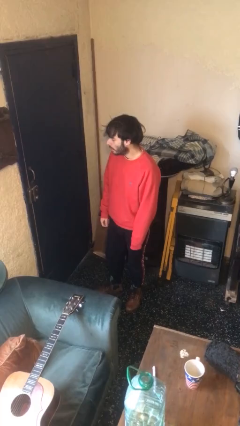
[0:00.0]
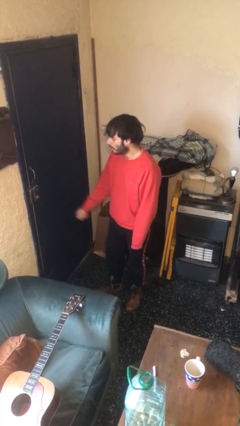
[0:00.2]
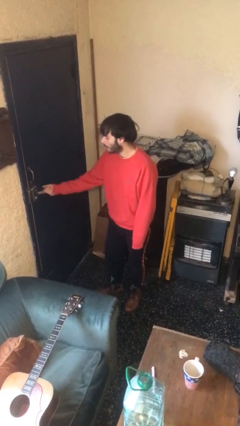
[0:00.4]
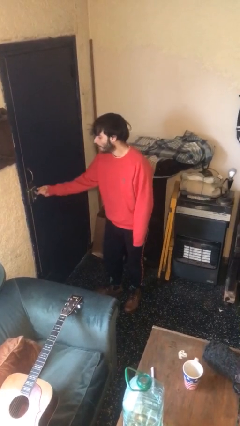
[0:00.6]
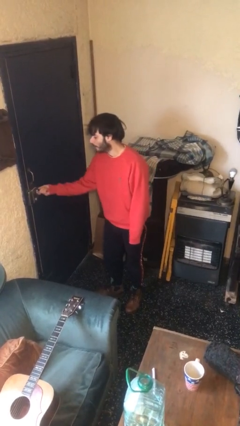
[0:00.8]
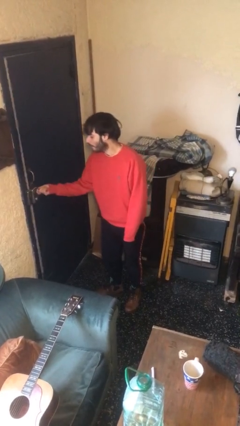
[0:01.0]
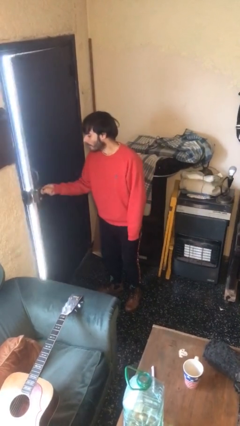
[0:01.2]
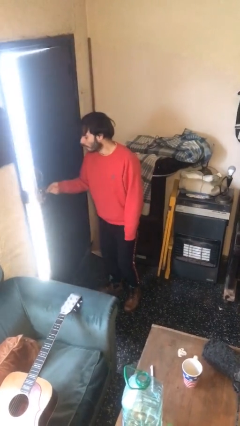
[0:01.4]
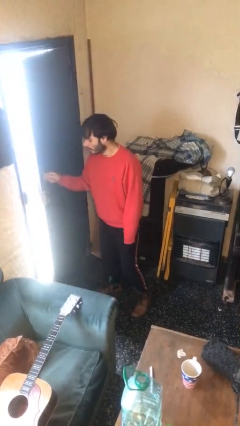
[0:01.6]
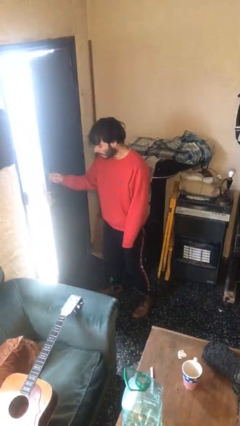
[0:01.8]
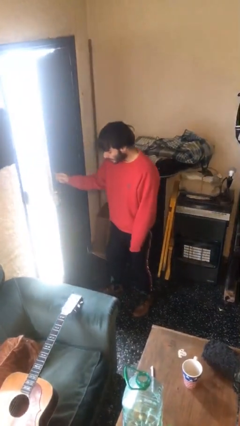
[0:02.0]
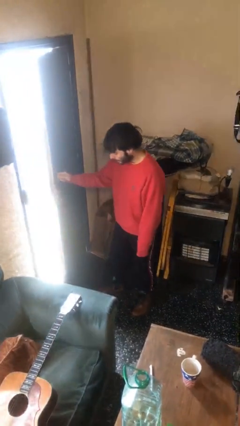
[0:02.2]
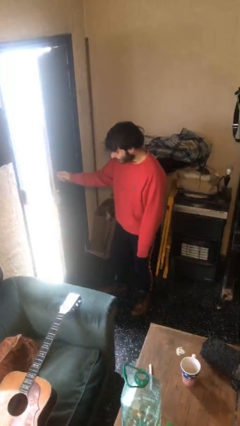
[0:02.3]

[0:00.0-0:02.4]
person opens facility door

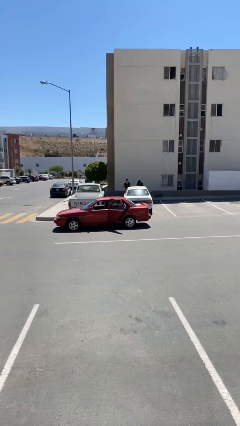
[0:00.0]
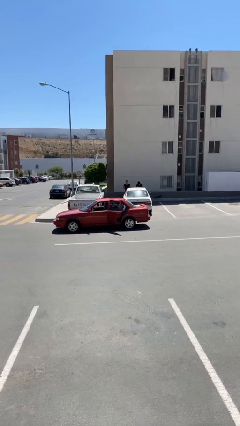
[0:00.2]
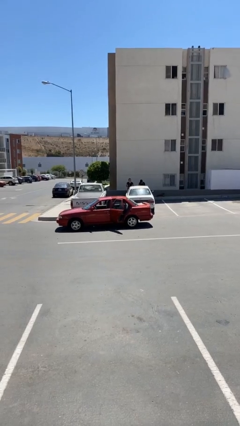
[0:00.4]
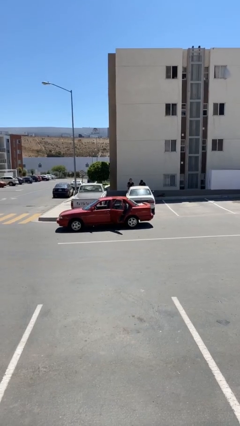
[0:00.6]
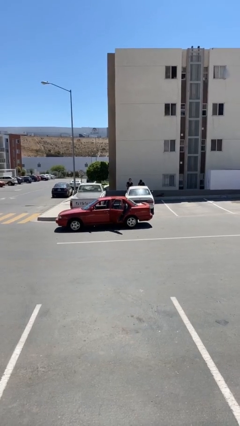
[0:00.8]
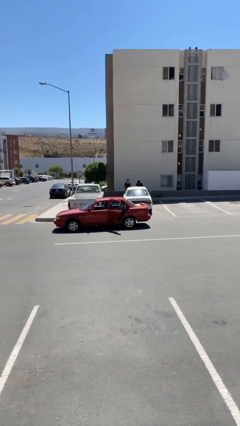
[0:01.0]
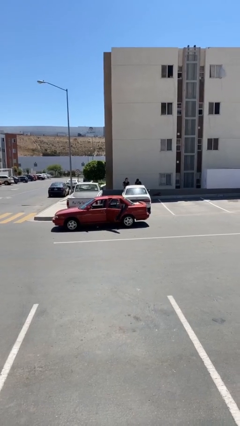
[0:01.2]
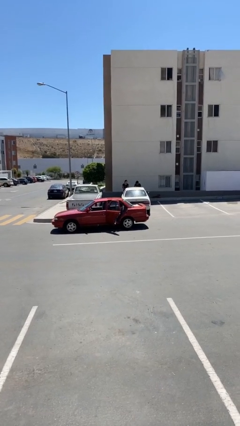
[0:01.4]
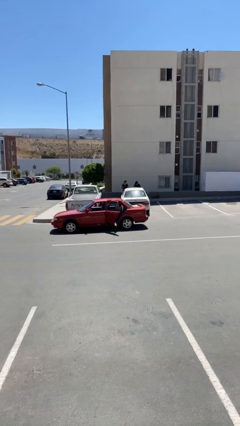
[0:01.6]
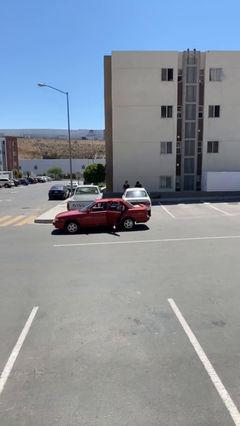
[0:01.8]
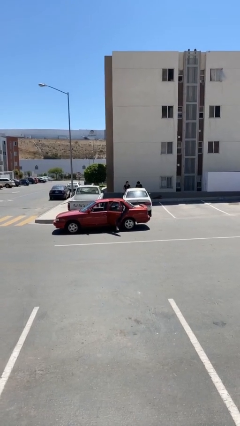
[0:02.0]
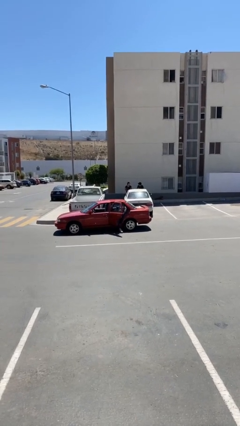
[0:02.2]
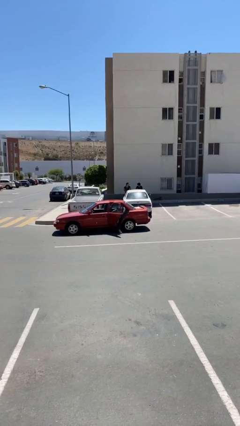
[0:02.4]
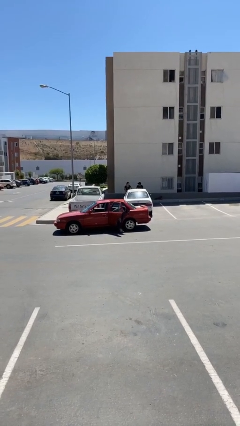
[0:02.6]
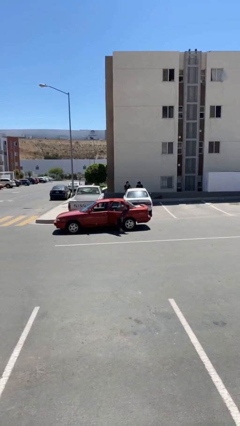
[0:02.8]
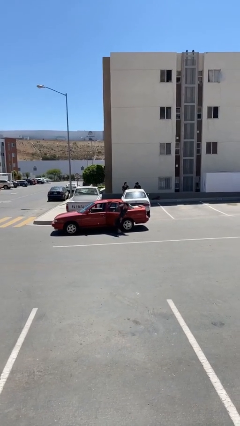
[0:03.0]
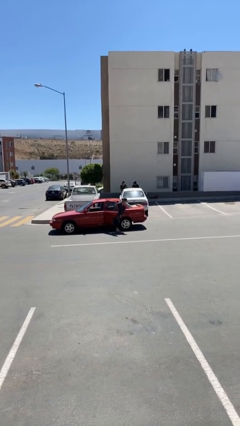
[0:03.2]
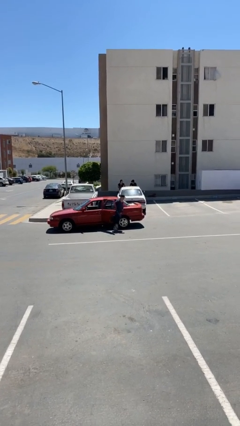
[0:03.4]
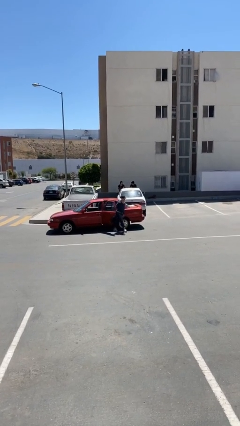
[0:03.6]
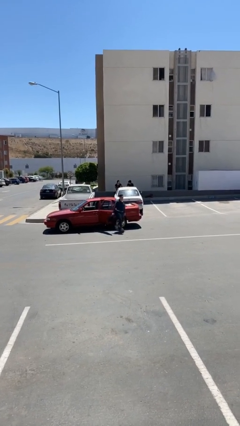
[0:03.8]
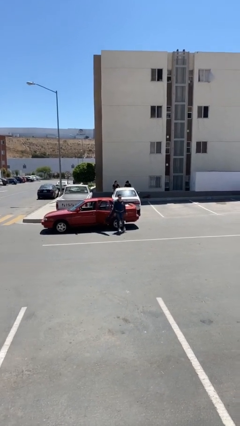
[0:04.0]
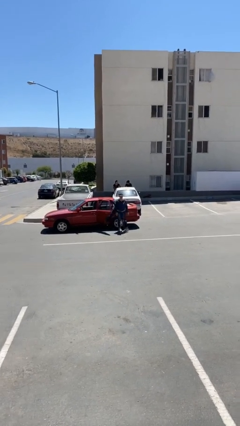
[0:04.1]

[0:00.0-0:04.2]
person exits car

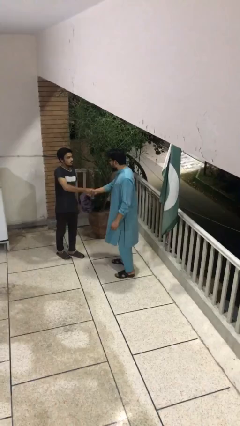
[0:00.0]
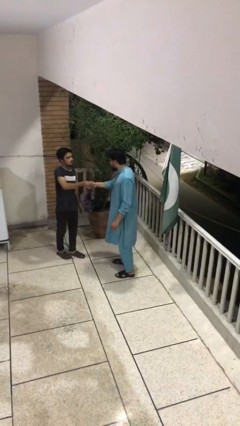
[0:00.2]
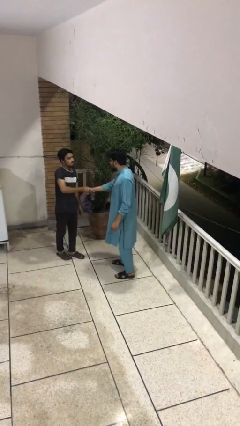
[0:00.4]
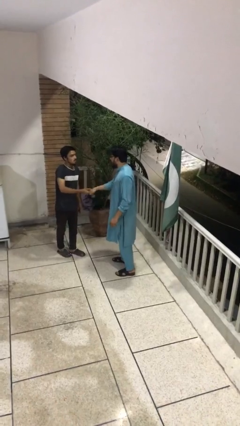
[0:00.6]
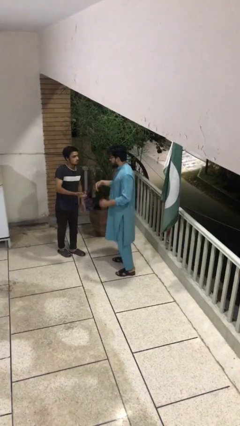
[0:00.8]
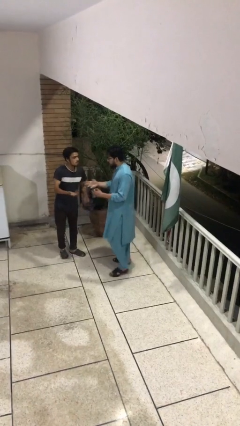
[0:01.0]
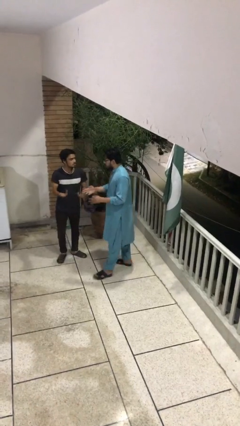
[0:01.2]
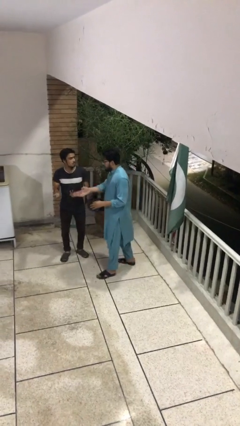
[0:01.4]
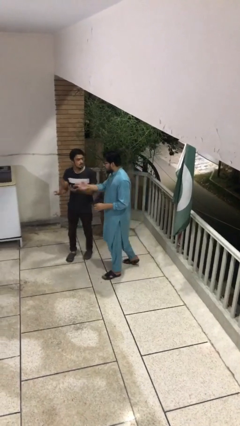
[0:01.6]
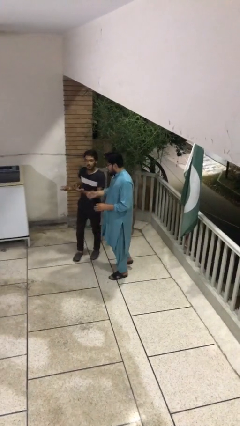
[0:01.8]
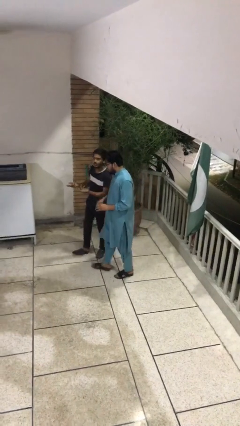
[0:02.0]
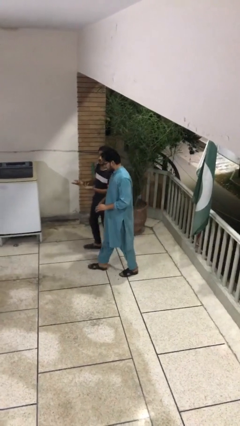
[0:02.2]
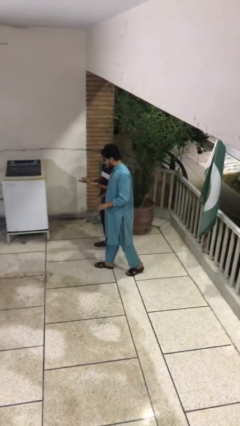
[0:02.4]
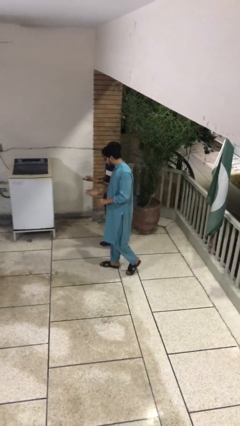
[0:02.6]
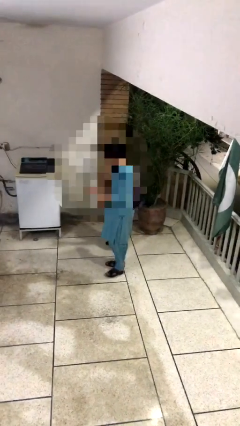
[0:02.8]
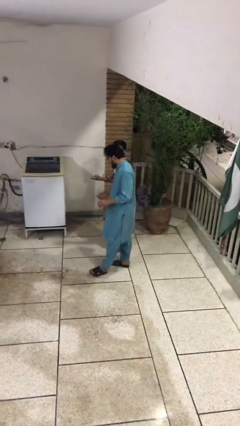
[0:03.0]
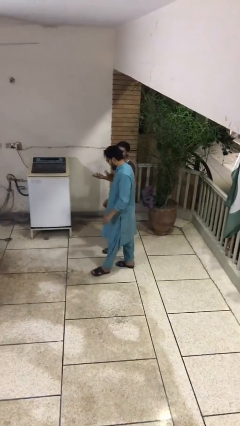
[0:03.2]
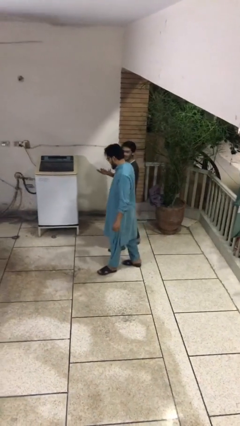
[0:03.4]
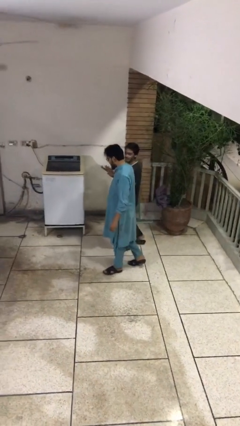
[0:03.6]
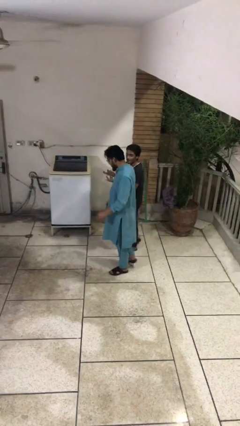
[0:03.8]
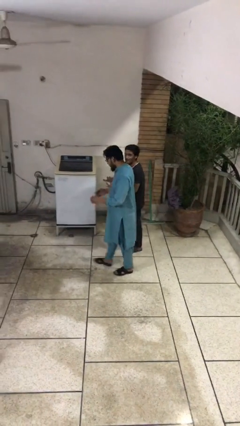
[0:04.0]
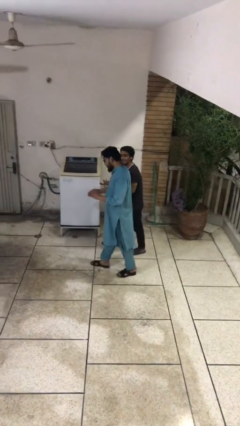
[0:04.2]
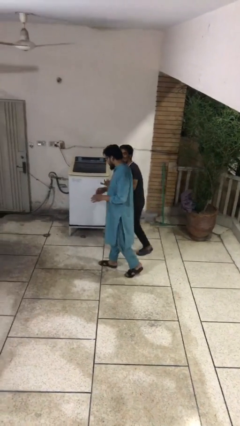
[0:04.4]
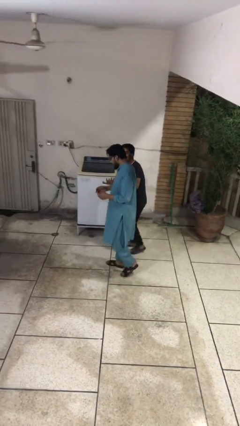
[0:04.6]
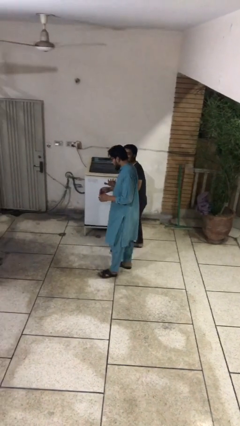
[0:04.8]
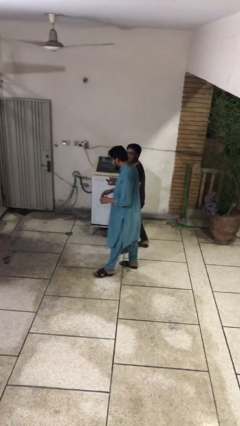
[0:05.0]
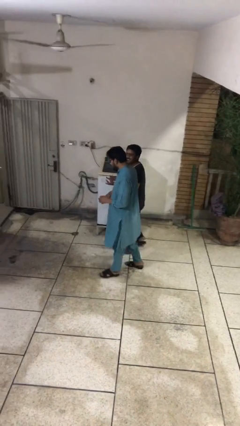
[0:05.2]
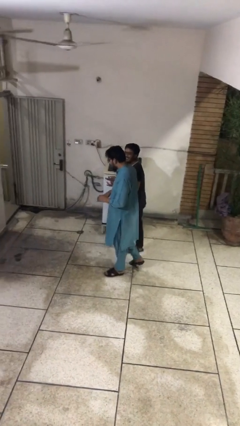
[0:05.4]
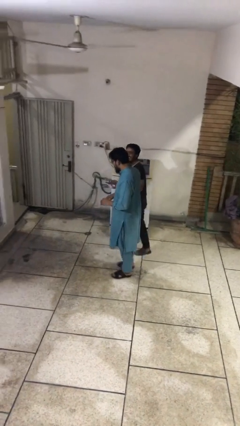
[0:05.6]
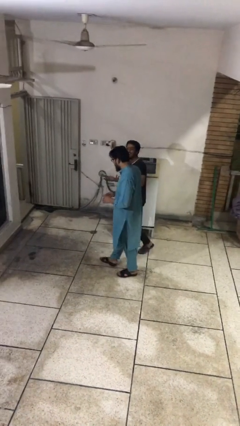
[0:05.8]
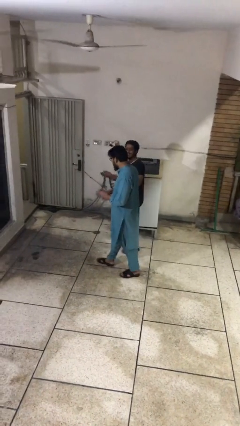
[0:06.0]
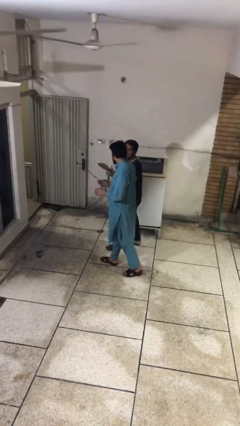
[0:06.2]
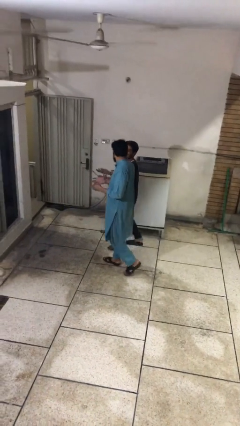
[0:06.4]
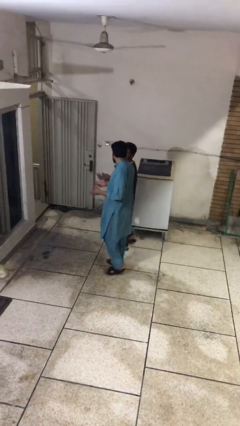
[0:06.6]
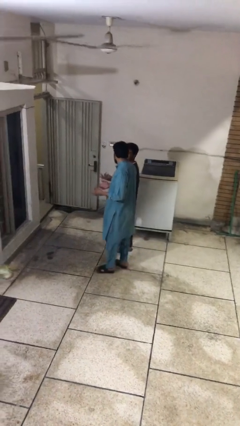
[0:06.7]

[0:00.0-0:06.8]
person talks to person

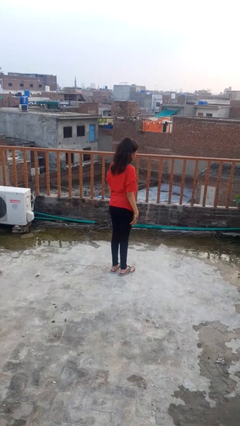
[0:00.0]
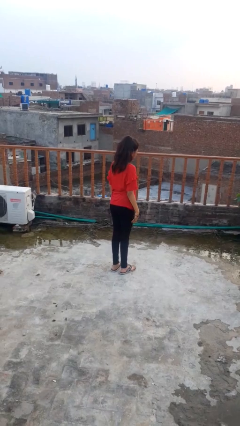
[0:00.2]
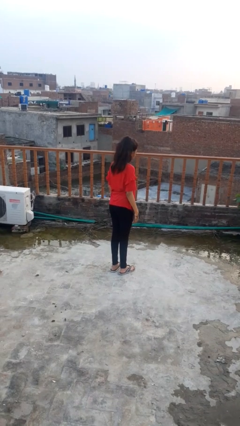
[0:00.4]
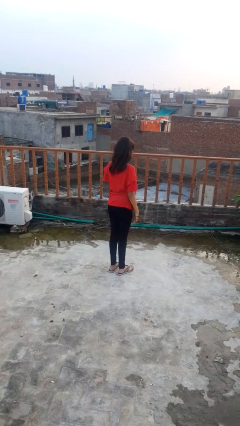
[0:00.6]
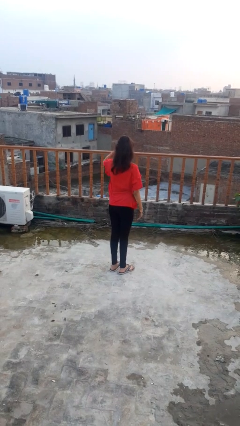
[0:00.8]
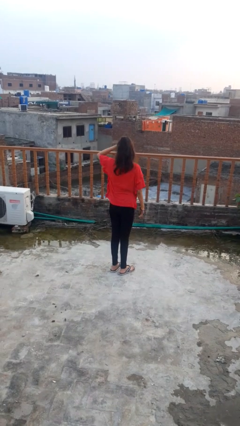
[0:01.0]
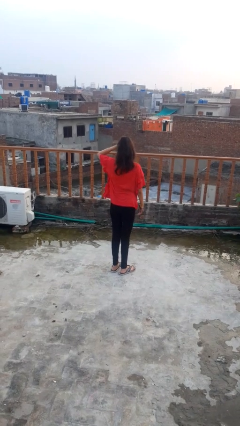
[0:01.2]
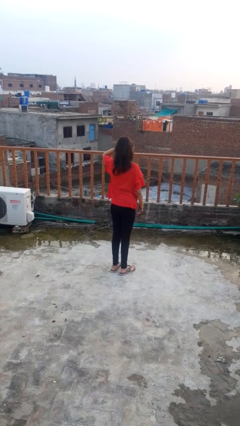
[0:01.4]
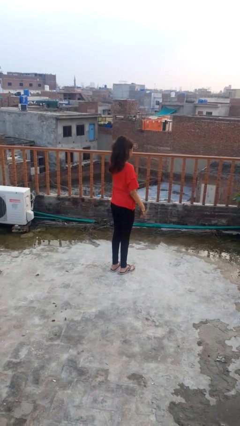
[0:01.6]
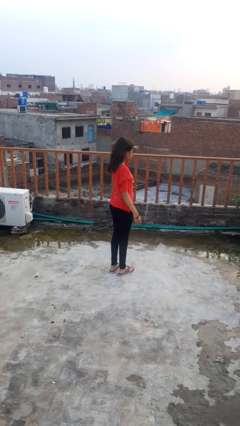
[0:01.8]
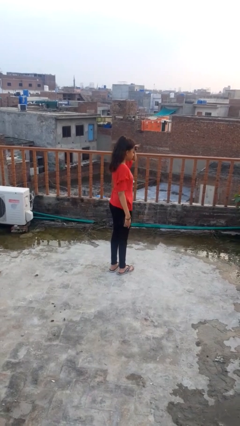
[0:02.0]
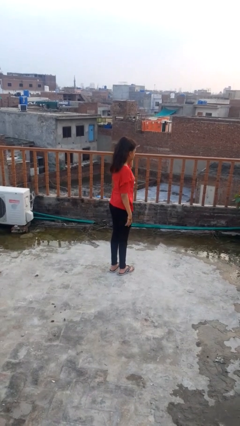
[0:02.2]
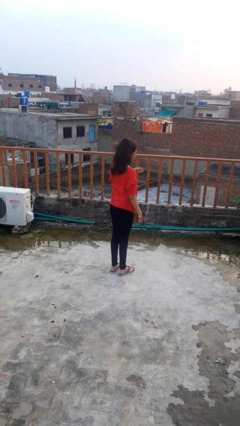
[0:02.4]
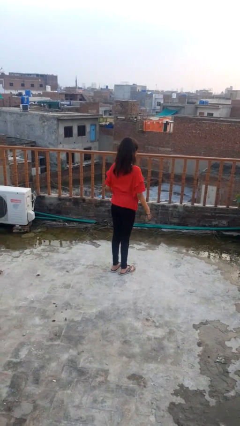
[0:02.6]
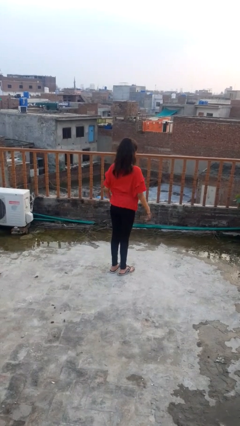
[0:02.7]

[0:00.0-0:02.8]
person shades eyes

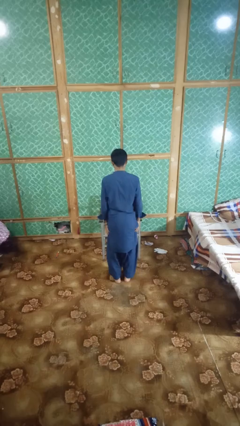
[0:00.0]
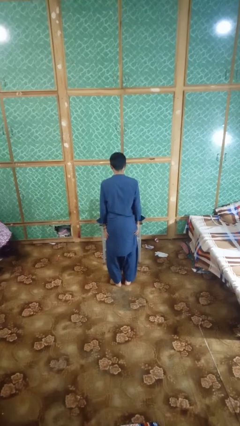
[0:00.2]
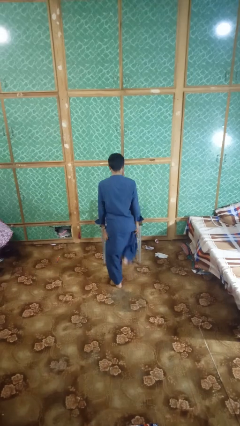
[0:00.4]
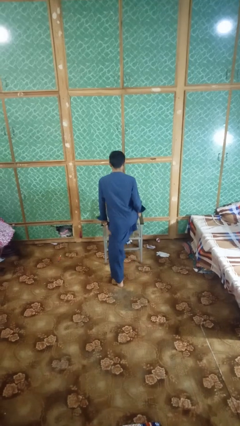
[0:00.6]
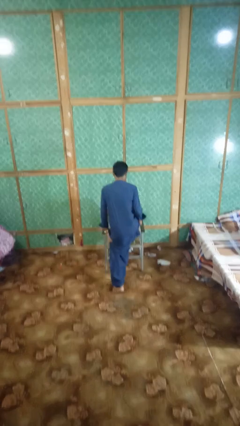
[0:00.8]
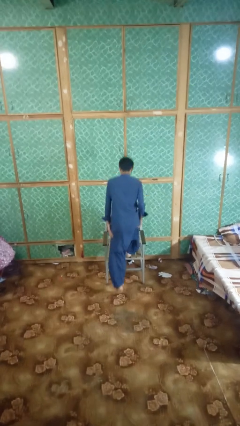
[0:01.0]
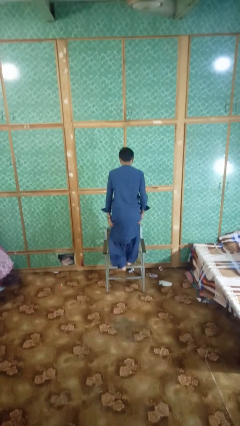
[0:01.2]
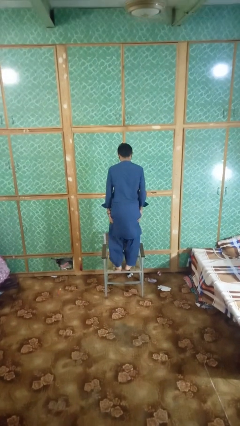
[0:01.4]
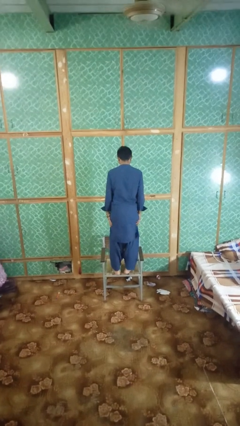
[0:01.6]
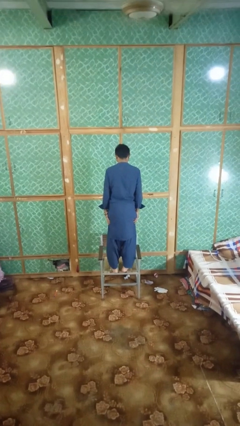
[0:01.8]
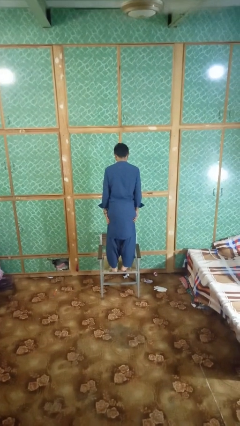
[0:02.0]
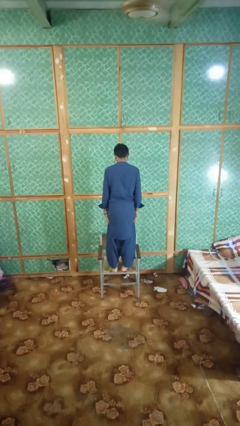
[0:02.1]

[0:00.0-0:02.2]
person climbs on chair
